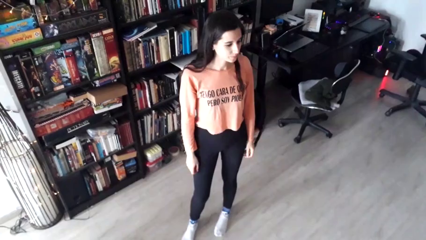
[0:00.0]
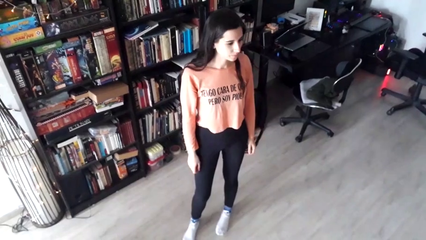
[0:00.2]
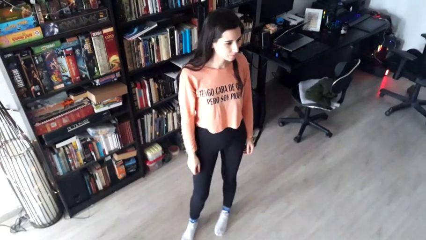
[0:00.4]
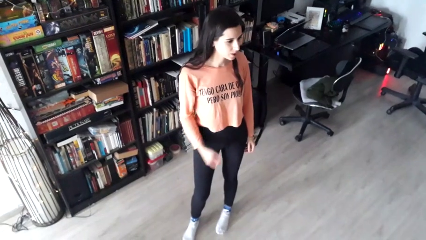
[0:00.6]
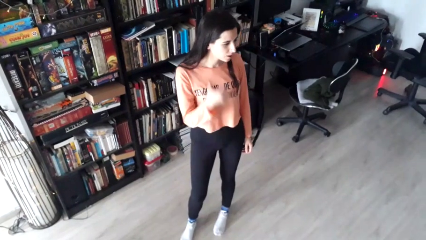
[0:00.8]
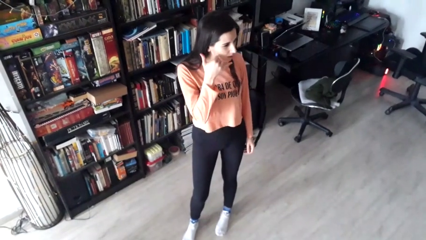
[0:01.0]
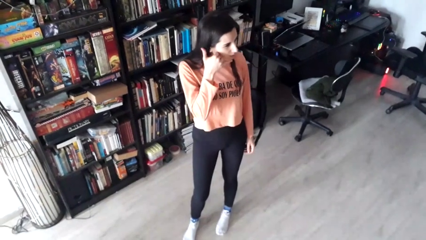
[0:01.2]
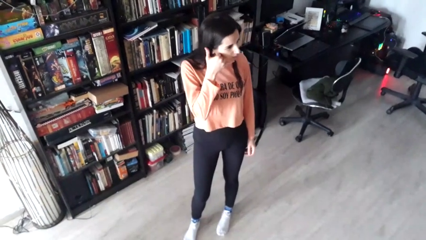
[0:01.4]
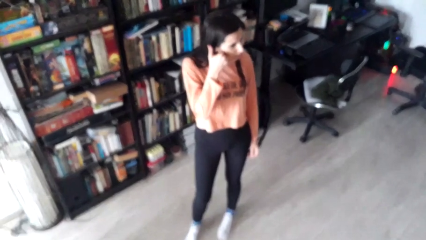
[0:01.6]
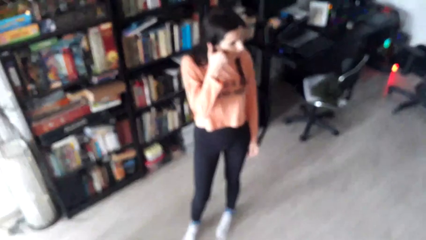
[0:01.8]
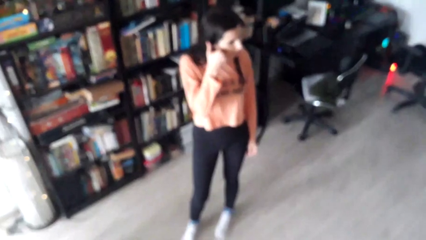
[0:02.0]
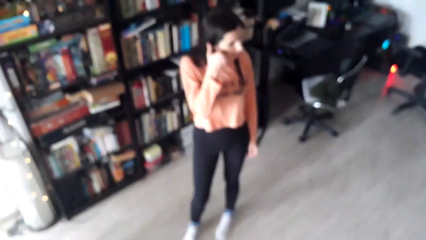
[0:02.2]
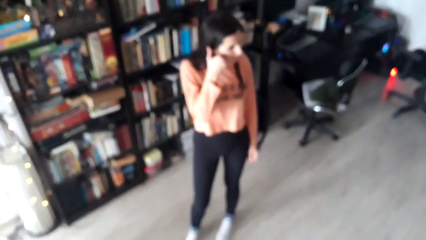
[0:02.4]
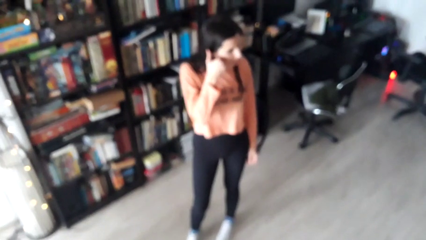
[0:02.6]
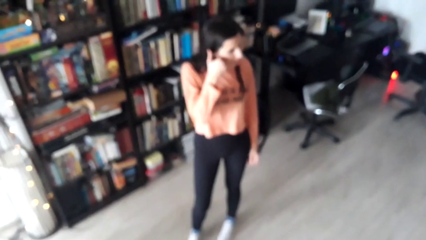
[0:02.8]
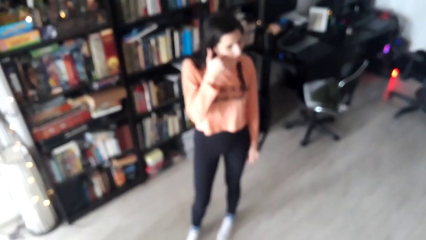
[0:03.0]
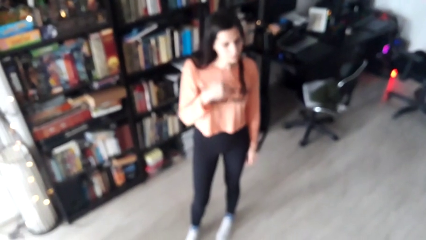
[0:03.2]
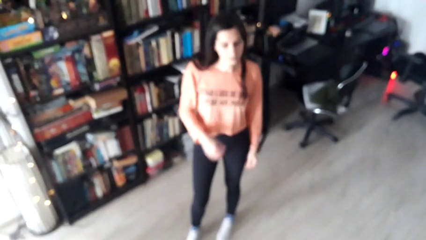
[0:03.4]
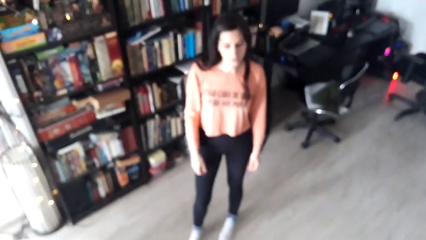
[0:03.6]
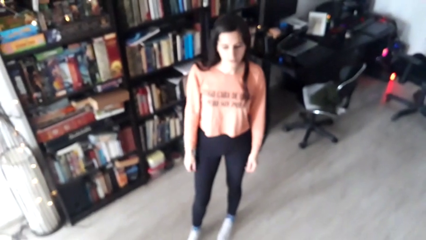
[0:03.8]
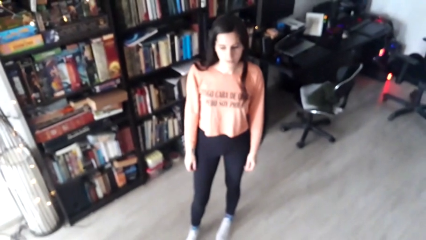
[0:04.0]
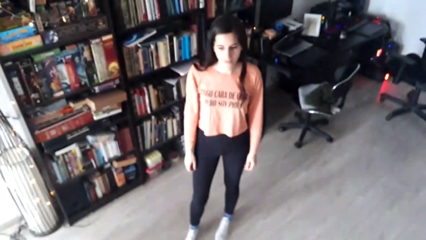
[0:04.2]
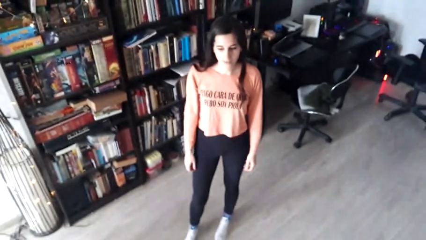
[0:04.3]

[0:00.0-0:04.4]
person gestures call me

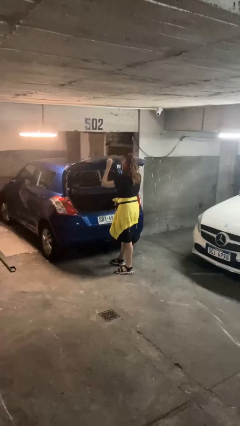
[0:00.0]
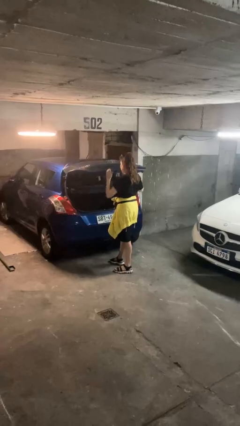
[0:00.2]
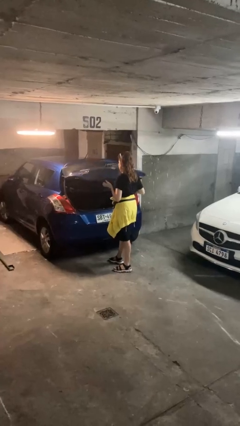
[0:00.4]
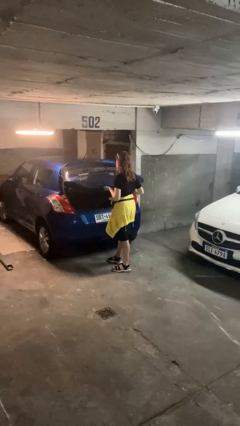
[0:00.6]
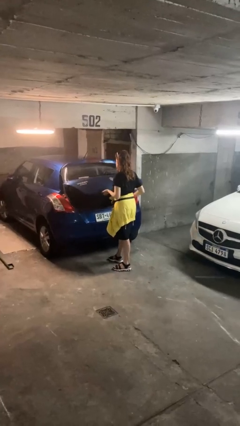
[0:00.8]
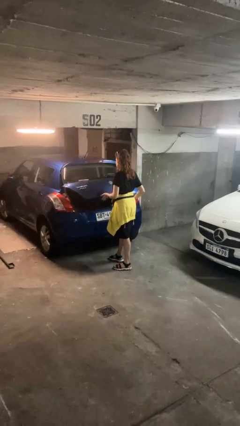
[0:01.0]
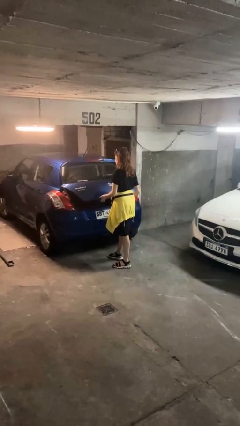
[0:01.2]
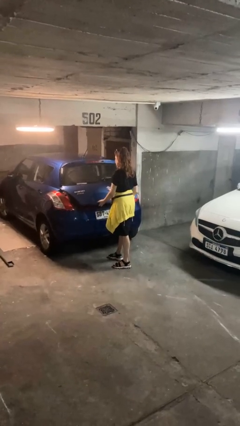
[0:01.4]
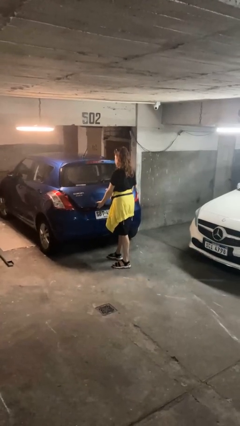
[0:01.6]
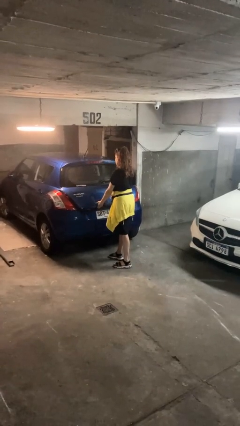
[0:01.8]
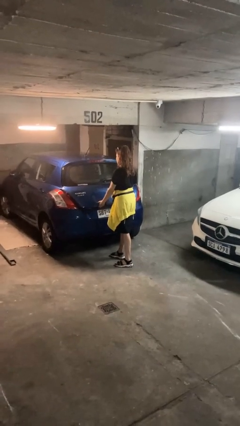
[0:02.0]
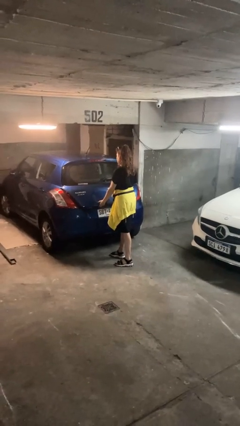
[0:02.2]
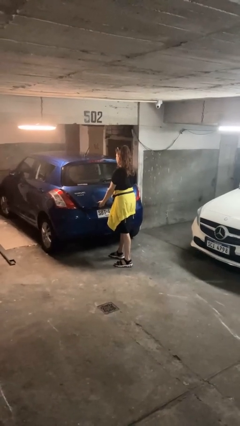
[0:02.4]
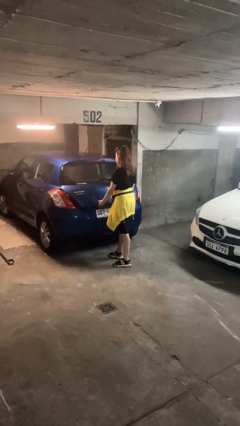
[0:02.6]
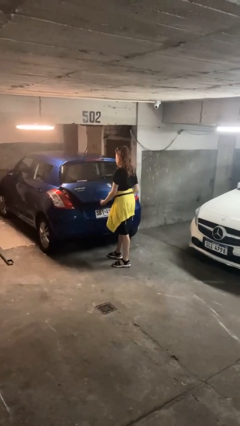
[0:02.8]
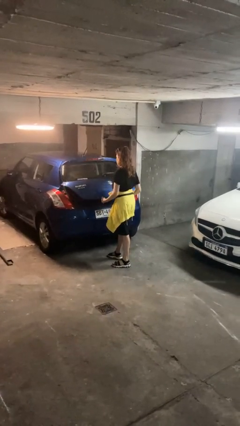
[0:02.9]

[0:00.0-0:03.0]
person closes car trunk

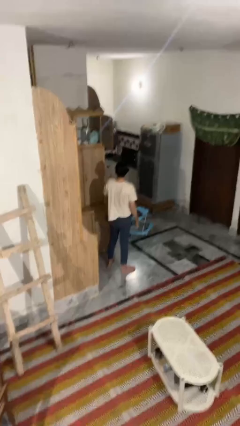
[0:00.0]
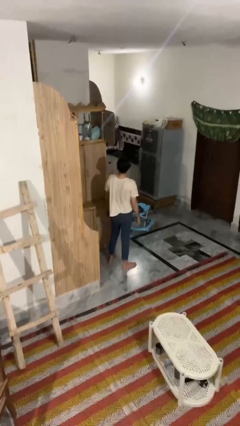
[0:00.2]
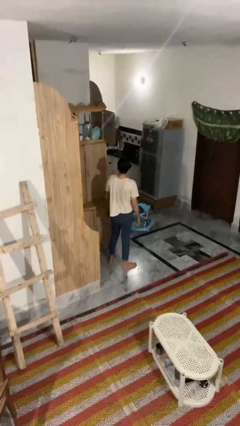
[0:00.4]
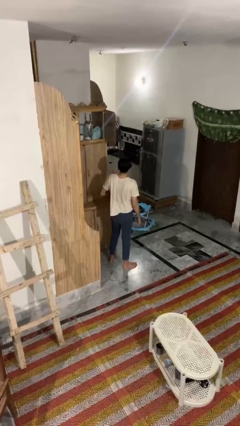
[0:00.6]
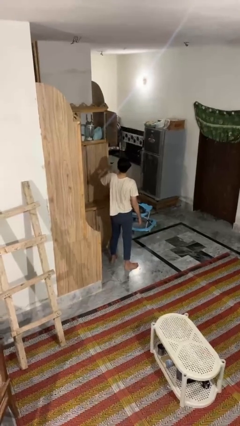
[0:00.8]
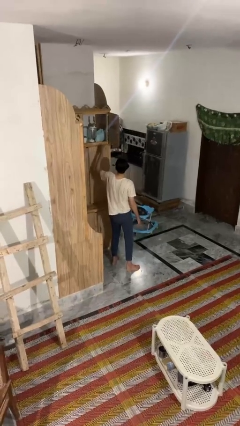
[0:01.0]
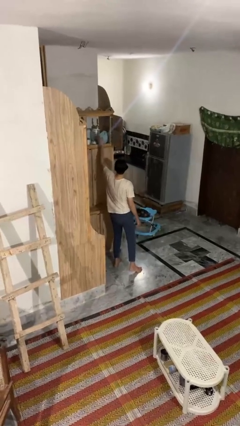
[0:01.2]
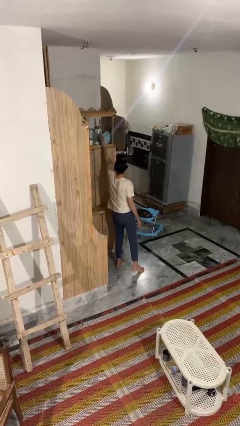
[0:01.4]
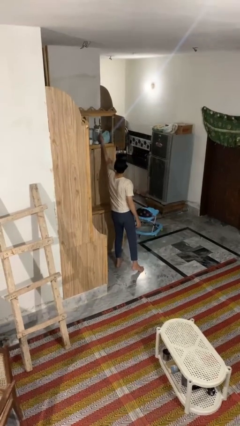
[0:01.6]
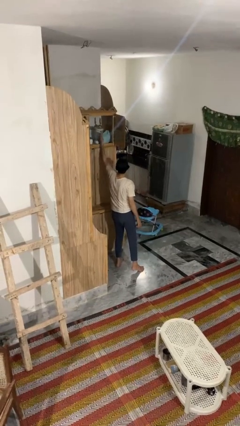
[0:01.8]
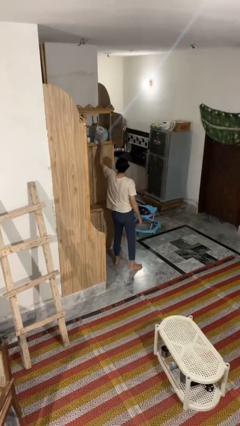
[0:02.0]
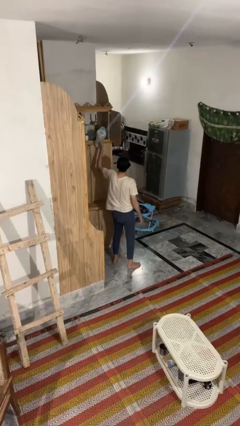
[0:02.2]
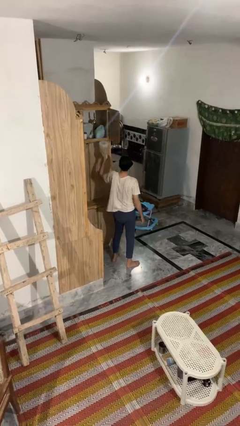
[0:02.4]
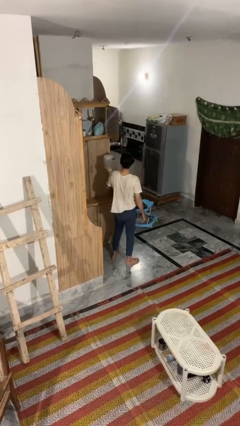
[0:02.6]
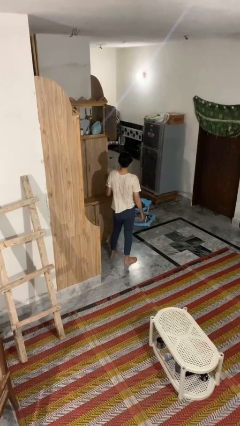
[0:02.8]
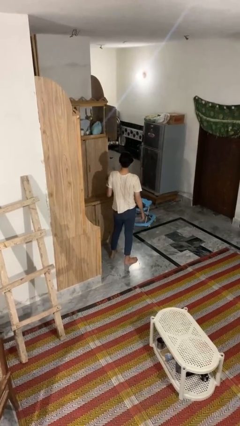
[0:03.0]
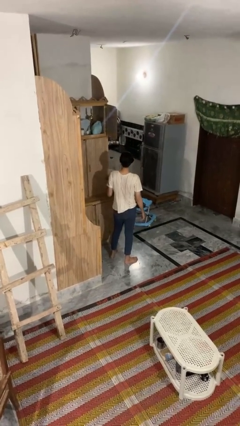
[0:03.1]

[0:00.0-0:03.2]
person picks up object from shelf

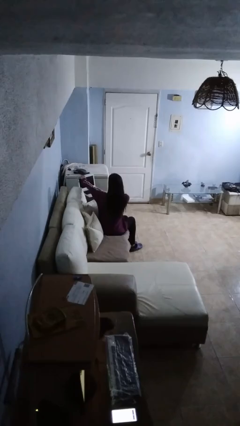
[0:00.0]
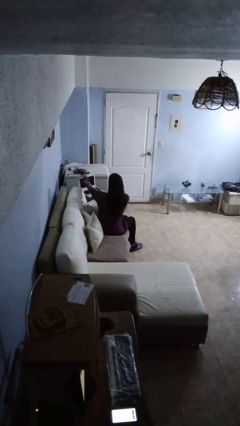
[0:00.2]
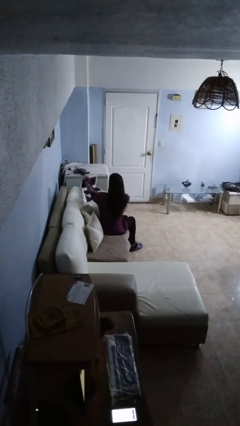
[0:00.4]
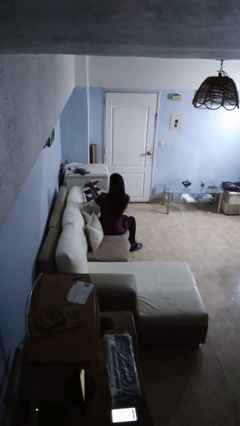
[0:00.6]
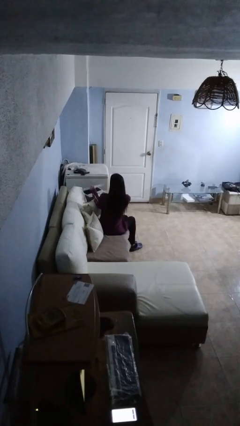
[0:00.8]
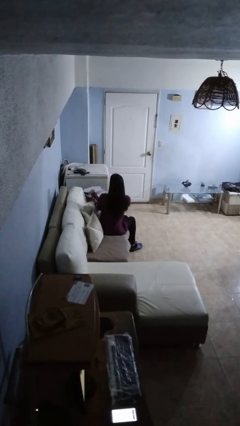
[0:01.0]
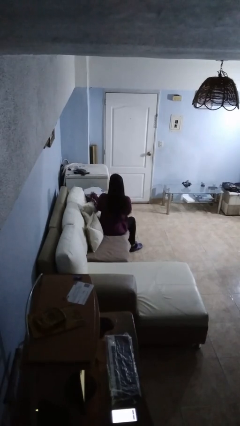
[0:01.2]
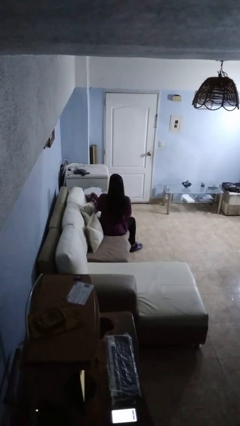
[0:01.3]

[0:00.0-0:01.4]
person closes laptop

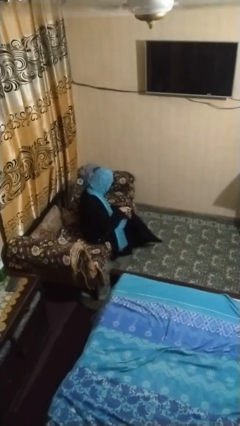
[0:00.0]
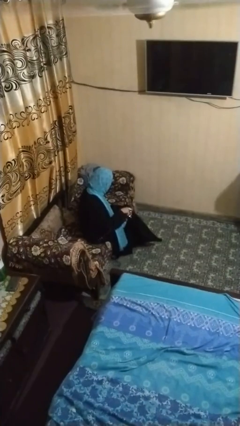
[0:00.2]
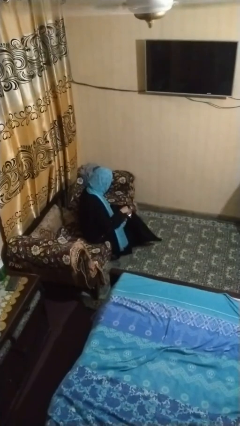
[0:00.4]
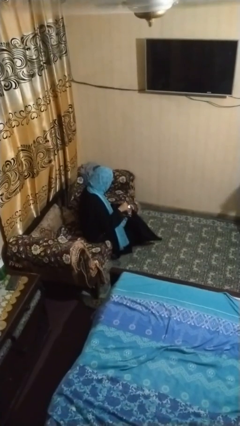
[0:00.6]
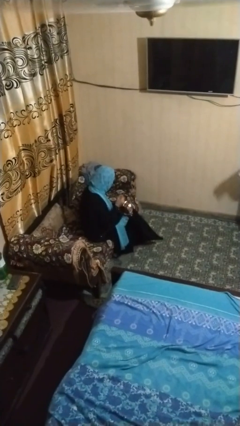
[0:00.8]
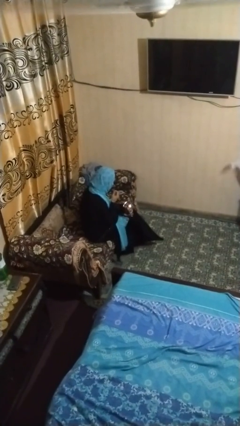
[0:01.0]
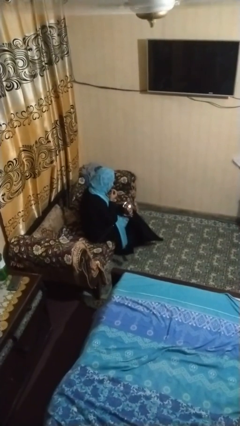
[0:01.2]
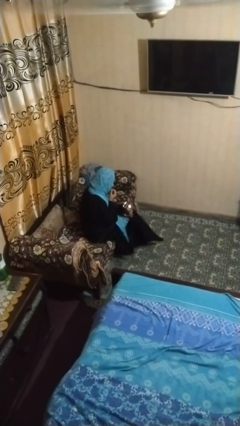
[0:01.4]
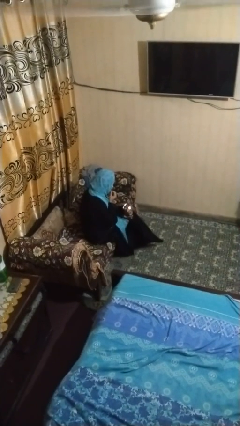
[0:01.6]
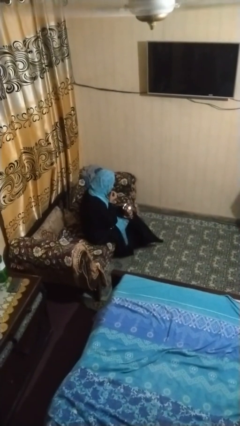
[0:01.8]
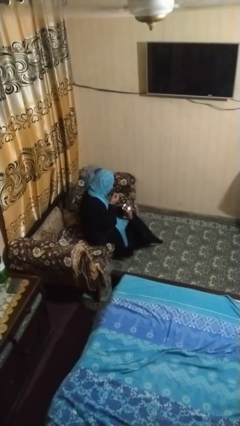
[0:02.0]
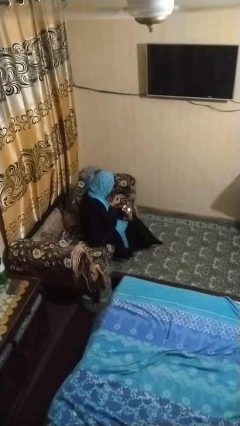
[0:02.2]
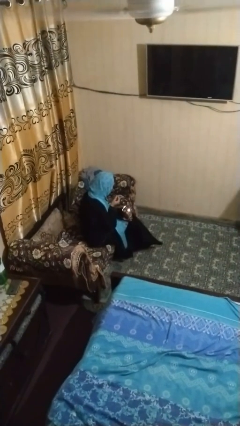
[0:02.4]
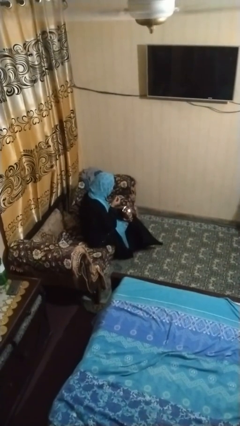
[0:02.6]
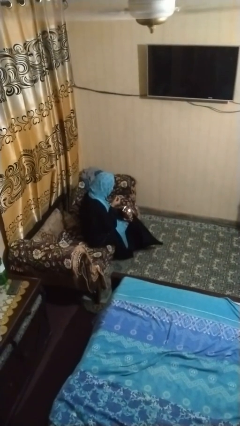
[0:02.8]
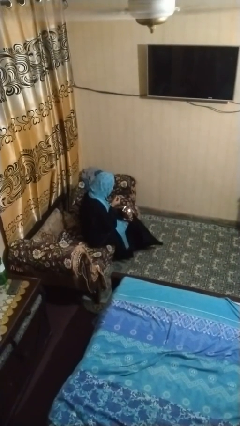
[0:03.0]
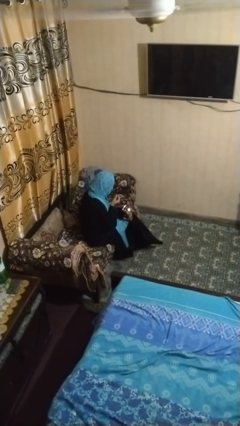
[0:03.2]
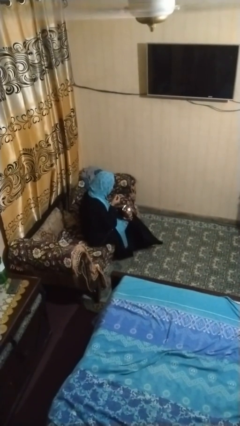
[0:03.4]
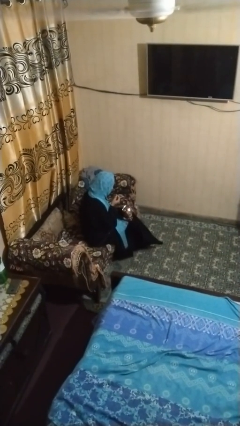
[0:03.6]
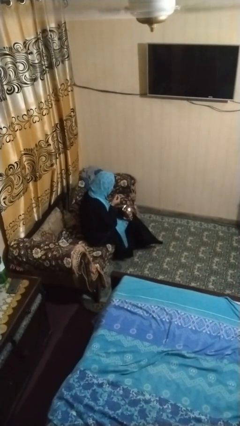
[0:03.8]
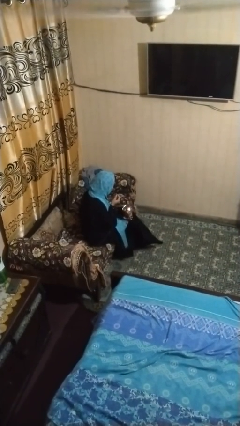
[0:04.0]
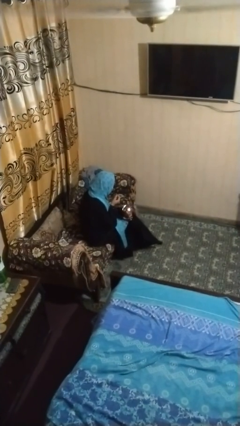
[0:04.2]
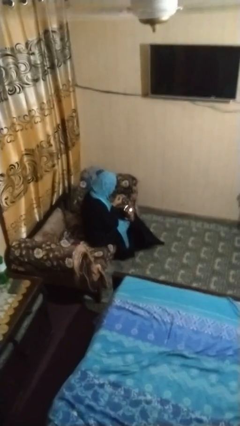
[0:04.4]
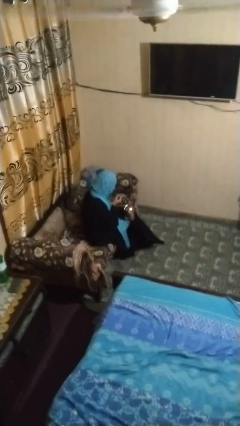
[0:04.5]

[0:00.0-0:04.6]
person eats snack from bag

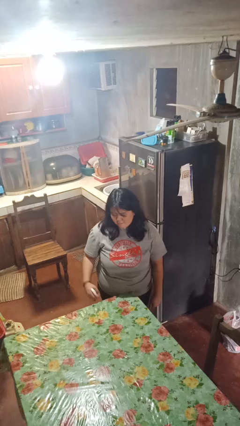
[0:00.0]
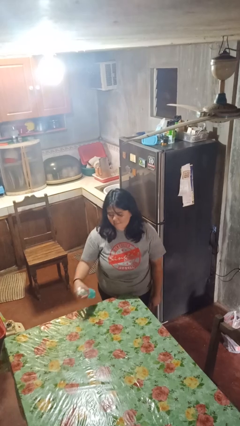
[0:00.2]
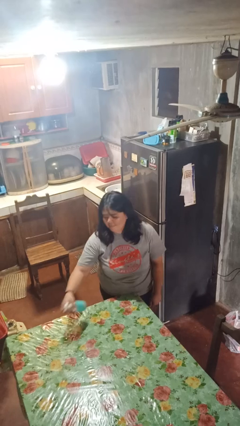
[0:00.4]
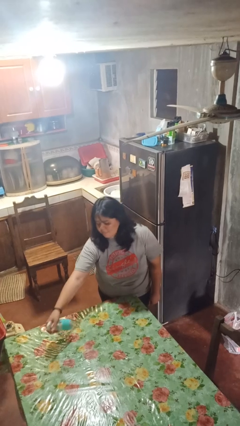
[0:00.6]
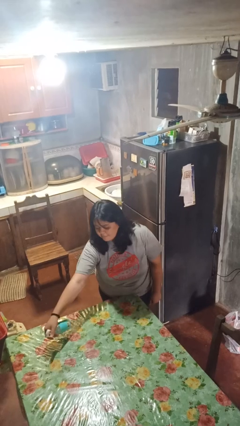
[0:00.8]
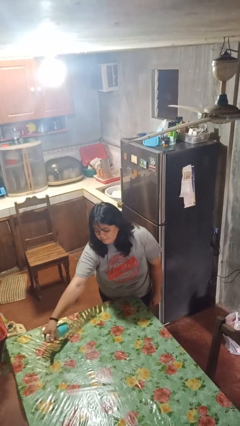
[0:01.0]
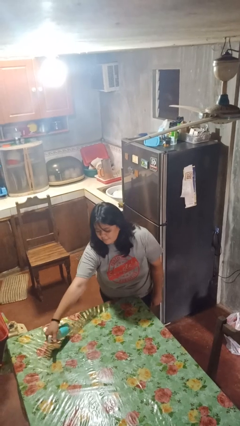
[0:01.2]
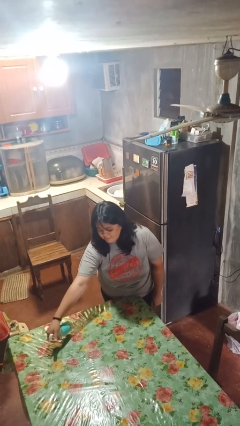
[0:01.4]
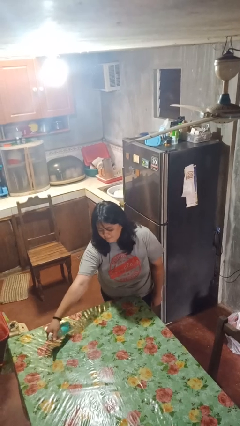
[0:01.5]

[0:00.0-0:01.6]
person sprays from bottle
